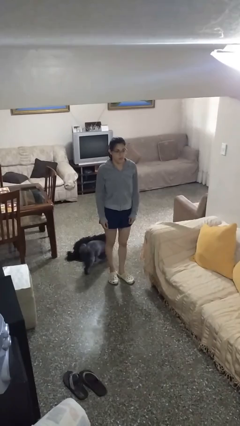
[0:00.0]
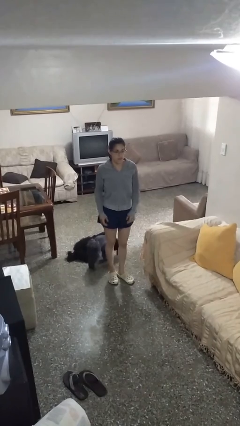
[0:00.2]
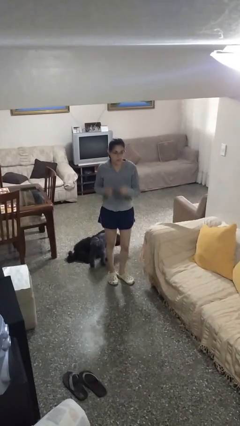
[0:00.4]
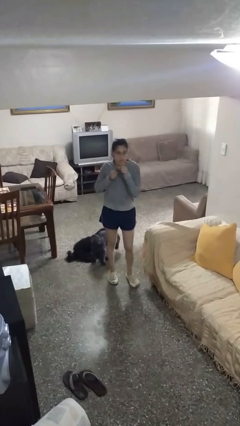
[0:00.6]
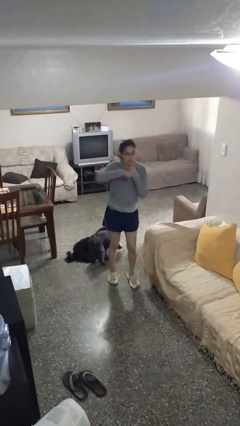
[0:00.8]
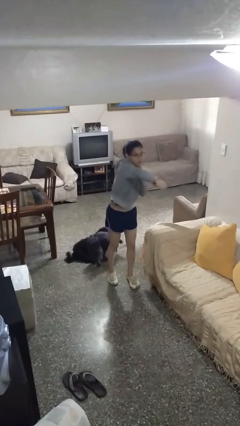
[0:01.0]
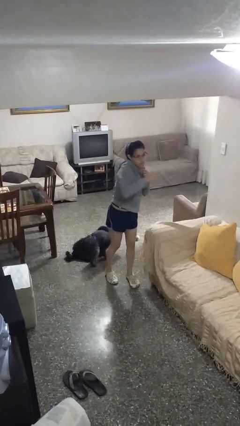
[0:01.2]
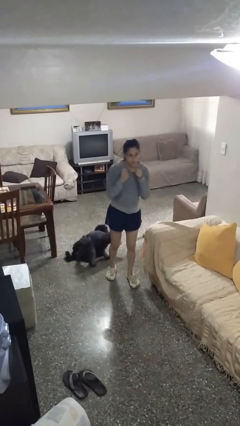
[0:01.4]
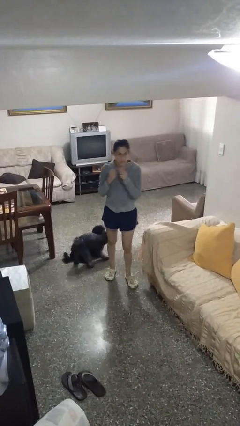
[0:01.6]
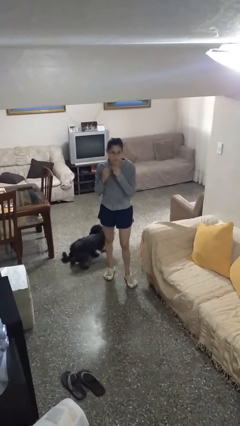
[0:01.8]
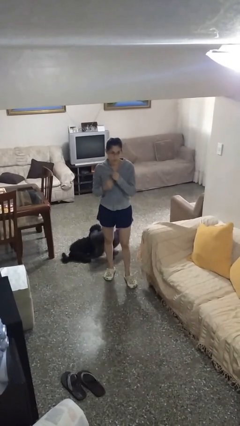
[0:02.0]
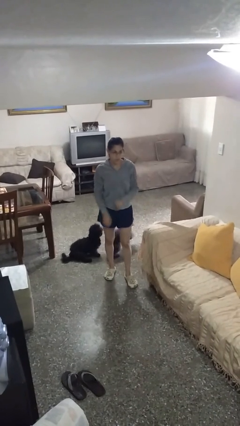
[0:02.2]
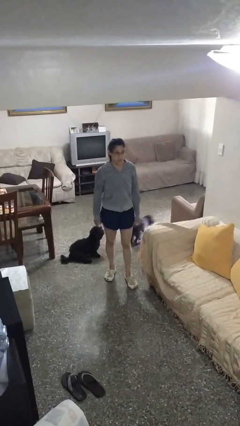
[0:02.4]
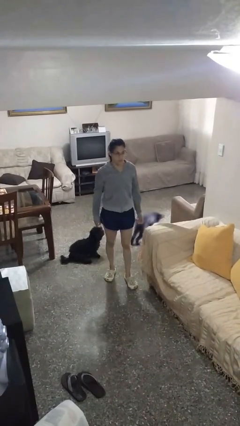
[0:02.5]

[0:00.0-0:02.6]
person karate chop

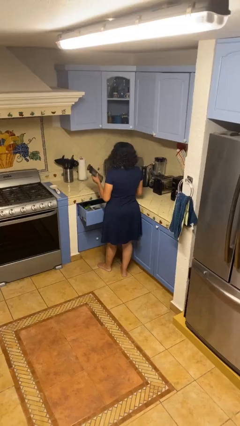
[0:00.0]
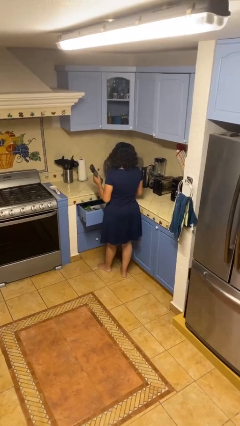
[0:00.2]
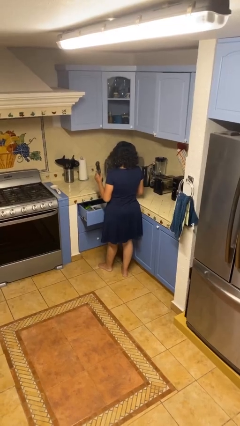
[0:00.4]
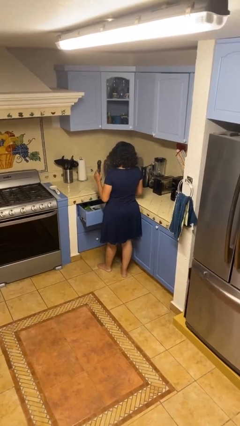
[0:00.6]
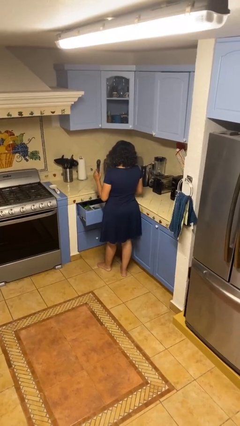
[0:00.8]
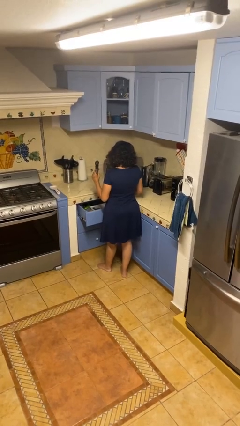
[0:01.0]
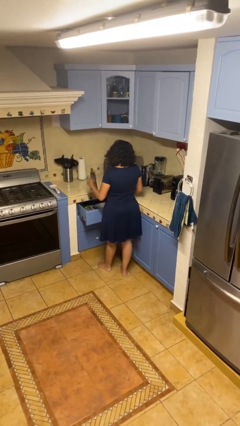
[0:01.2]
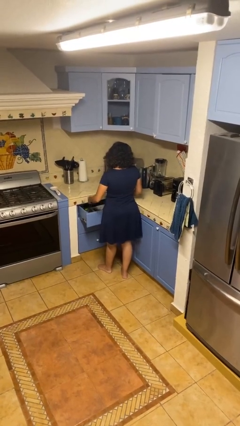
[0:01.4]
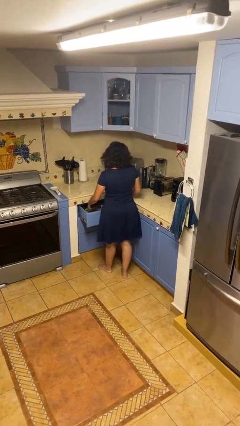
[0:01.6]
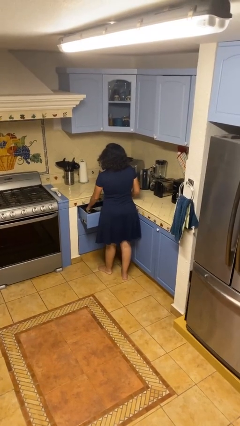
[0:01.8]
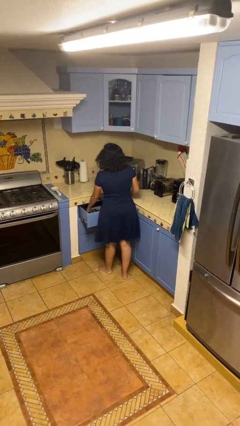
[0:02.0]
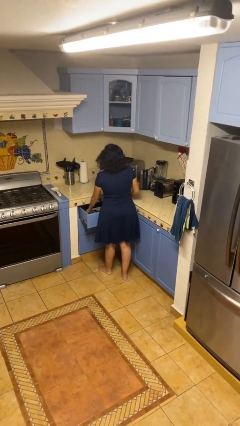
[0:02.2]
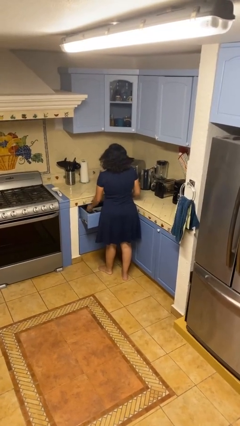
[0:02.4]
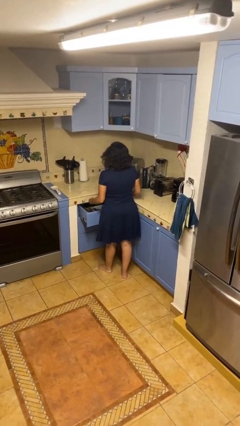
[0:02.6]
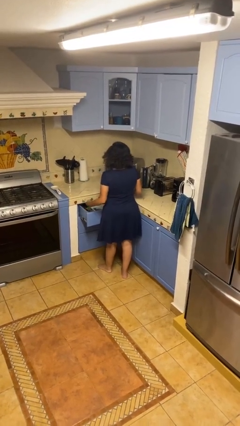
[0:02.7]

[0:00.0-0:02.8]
person puts object into kitchen drawer

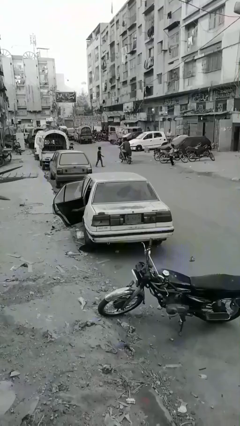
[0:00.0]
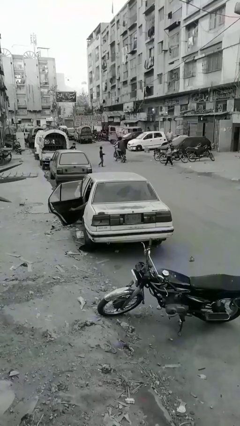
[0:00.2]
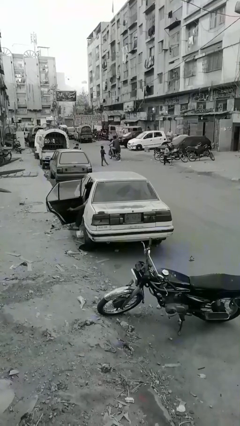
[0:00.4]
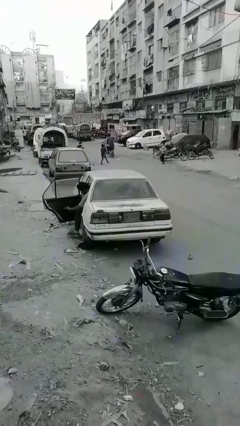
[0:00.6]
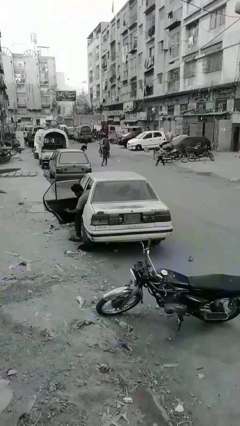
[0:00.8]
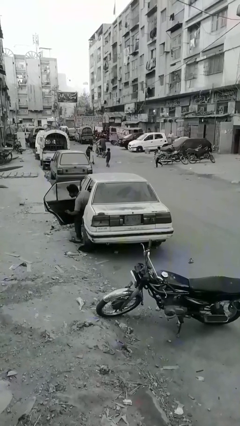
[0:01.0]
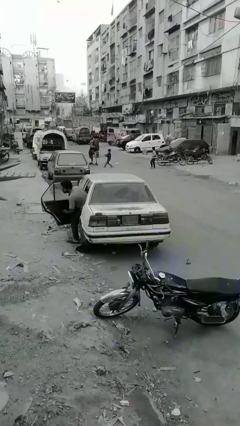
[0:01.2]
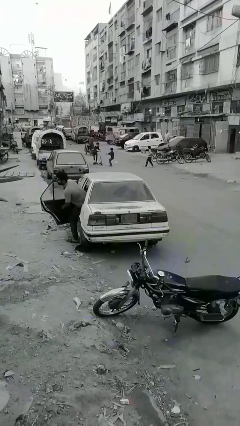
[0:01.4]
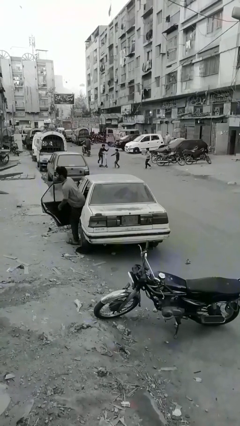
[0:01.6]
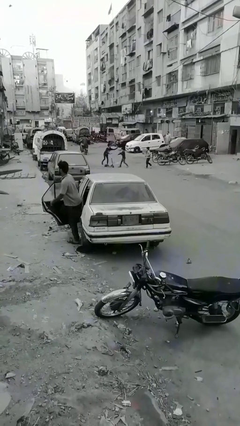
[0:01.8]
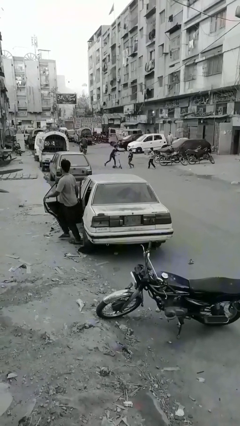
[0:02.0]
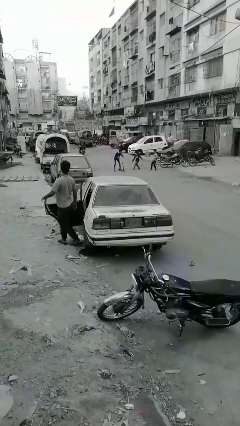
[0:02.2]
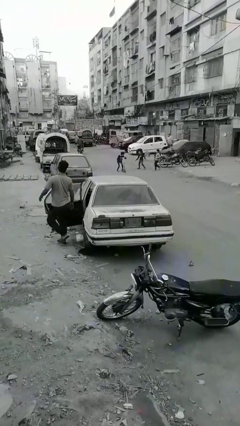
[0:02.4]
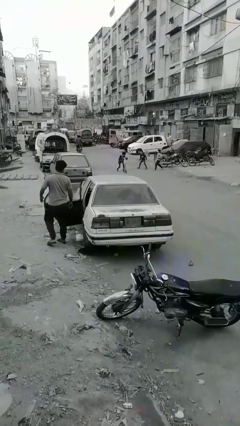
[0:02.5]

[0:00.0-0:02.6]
car drops off person

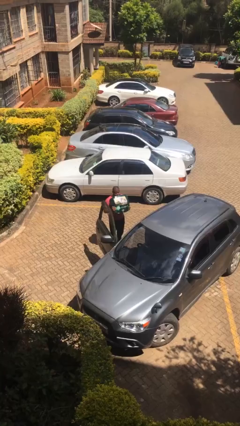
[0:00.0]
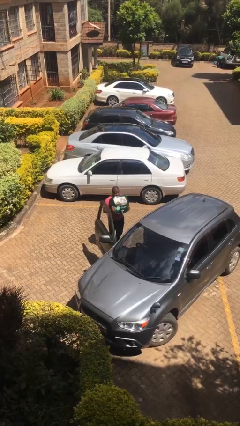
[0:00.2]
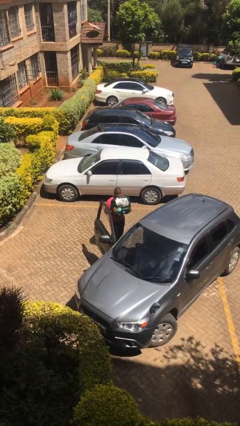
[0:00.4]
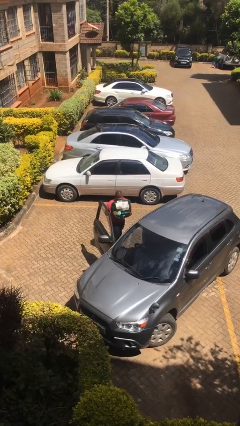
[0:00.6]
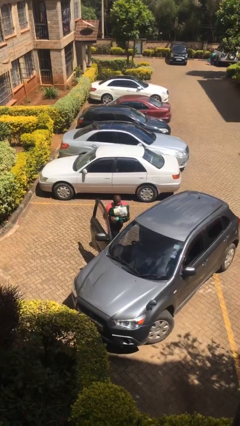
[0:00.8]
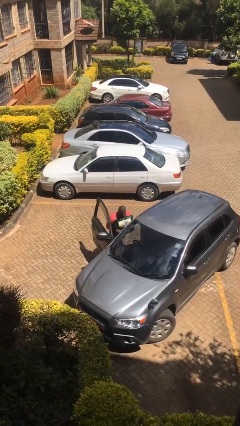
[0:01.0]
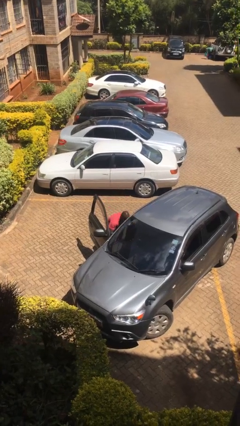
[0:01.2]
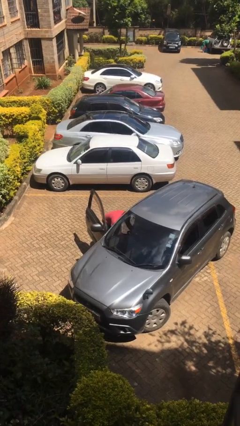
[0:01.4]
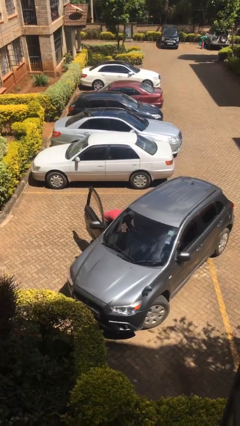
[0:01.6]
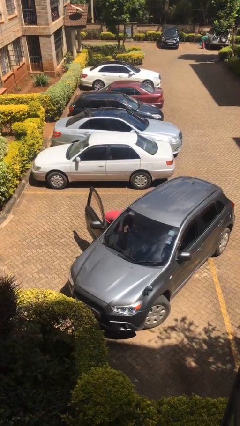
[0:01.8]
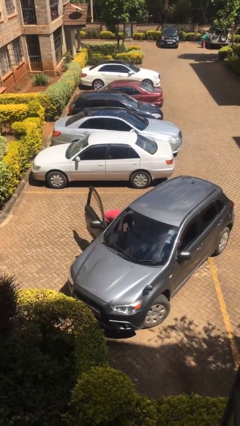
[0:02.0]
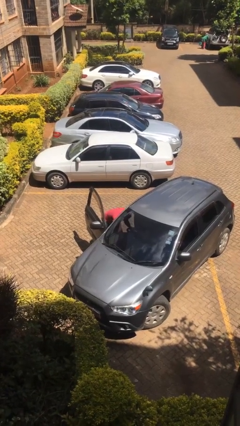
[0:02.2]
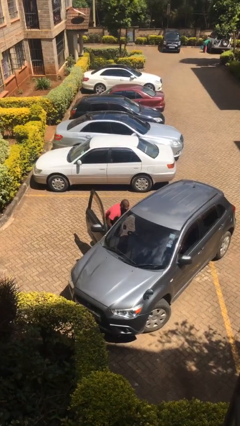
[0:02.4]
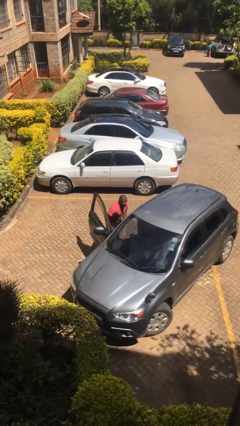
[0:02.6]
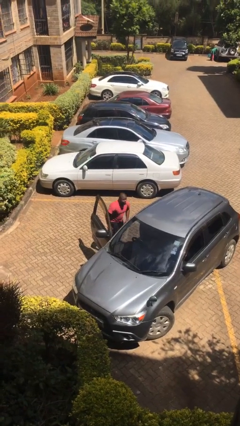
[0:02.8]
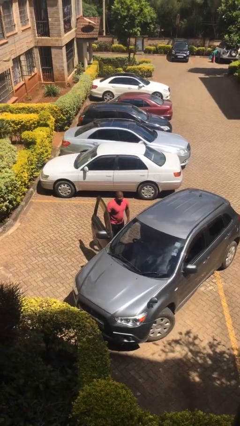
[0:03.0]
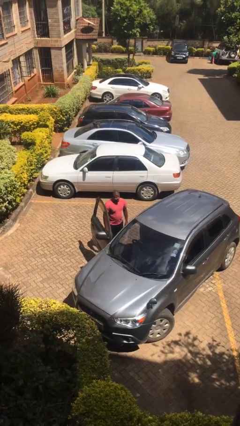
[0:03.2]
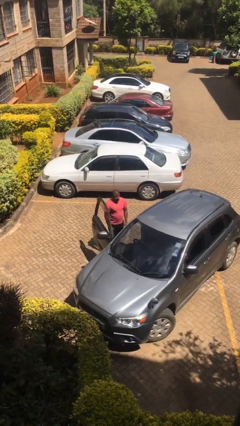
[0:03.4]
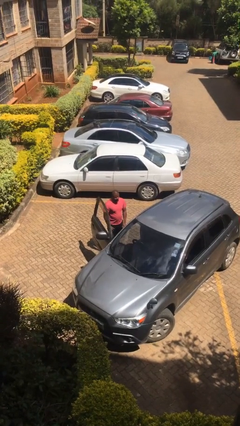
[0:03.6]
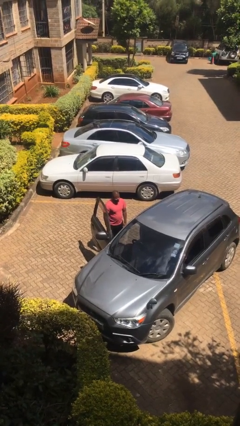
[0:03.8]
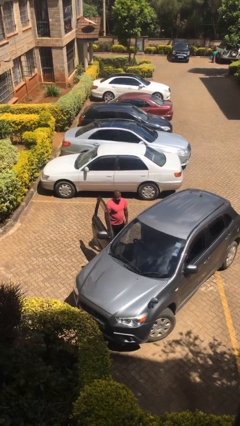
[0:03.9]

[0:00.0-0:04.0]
person loads car

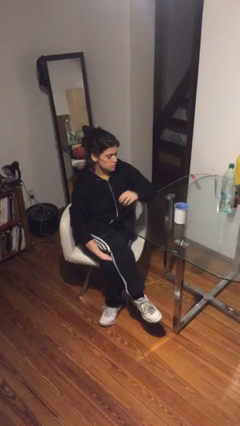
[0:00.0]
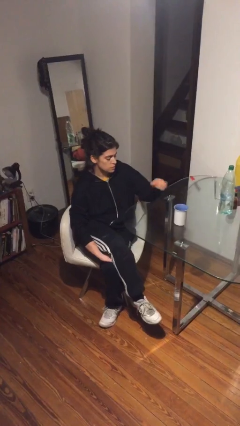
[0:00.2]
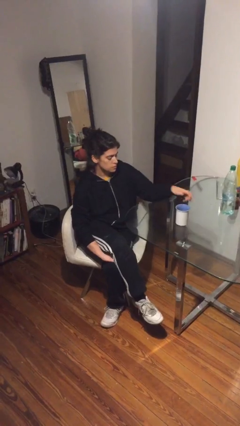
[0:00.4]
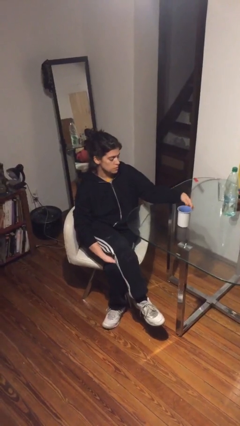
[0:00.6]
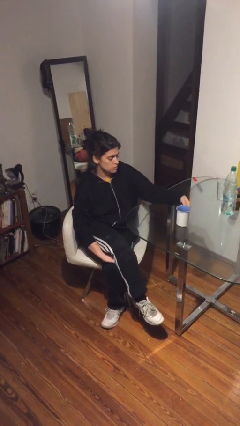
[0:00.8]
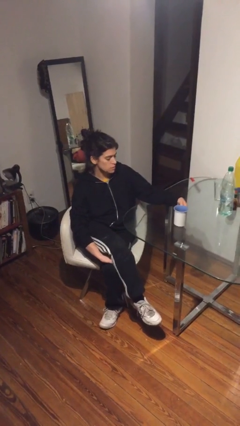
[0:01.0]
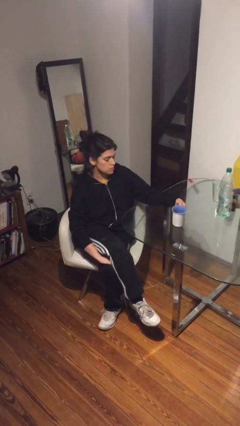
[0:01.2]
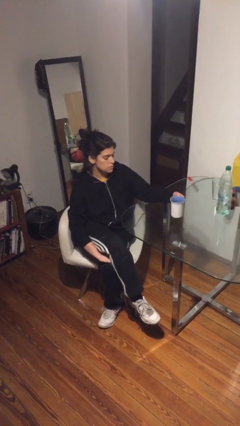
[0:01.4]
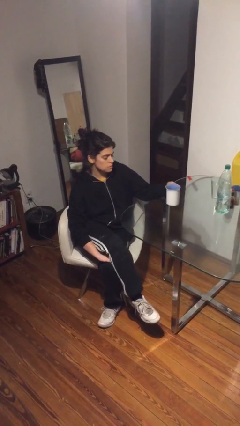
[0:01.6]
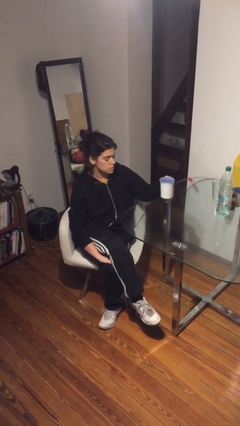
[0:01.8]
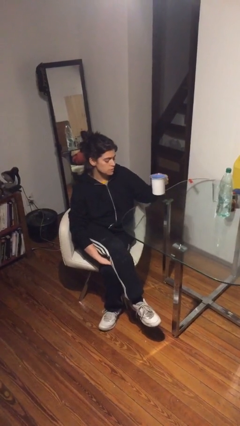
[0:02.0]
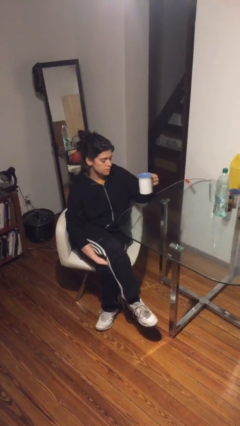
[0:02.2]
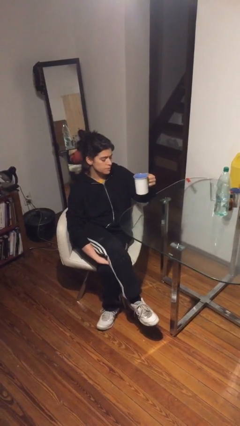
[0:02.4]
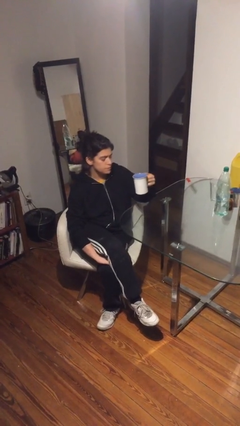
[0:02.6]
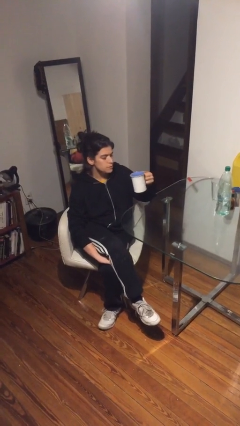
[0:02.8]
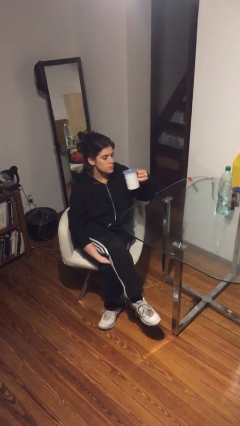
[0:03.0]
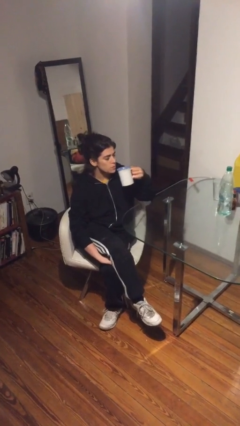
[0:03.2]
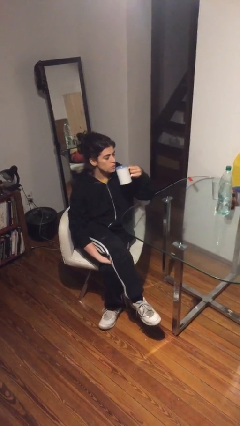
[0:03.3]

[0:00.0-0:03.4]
person picks up object from table

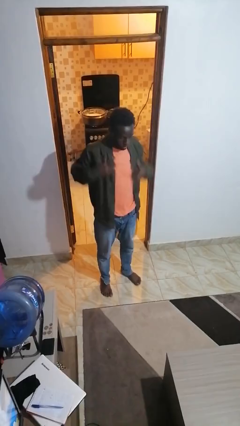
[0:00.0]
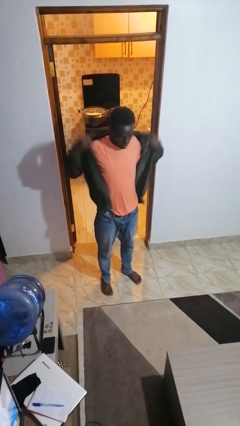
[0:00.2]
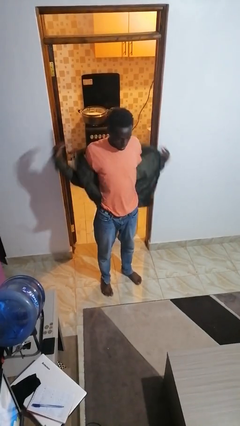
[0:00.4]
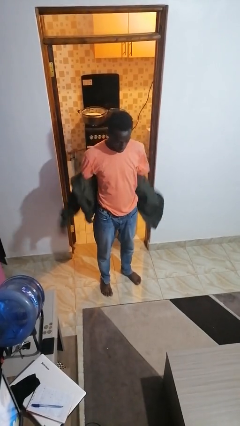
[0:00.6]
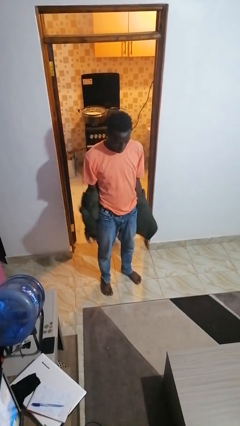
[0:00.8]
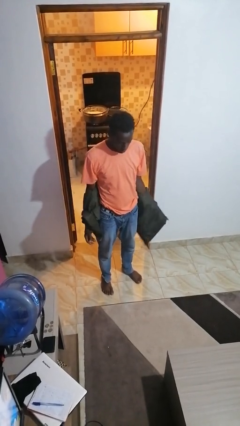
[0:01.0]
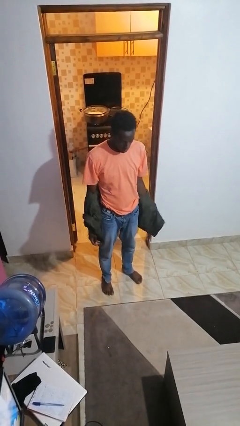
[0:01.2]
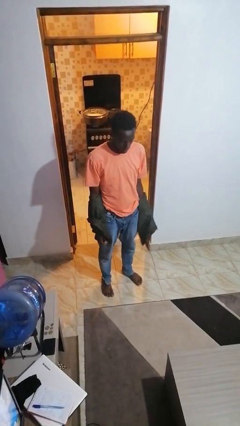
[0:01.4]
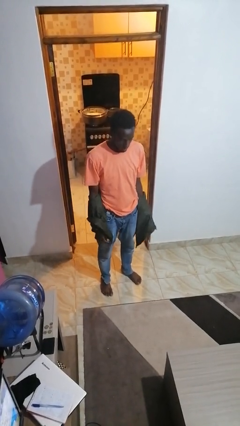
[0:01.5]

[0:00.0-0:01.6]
person takes off jacket

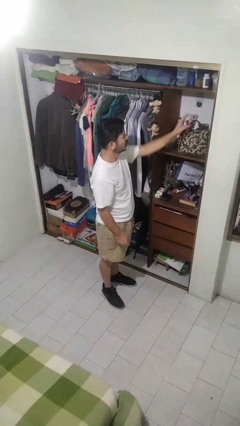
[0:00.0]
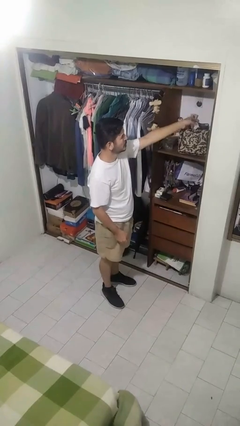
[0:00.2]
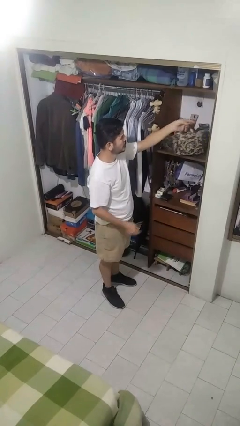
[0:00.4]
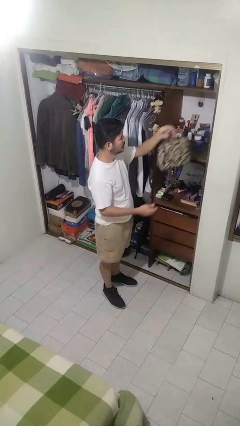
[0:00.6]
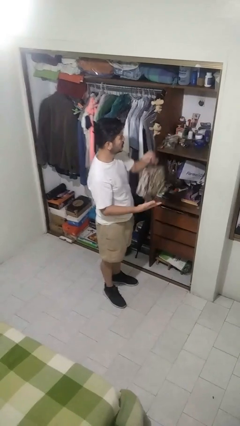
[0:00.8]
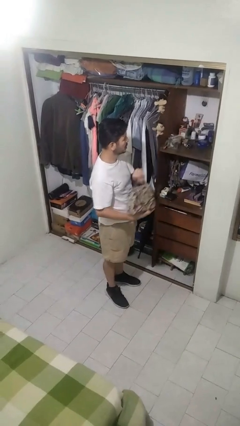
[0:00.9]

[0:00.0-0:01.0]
person puts down object on shelf
